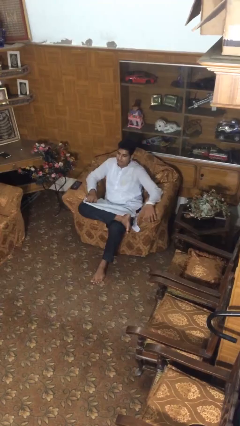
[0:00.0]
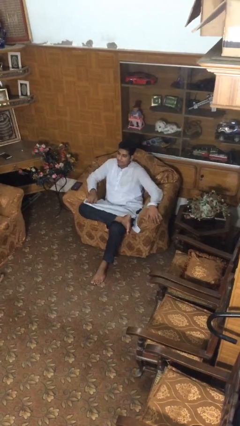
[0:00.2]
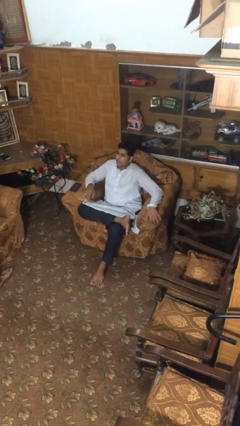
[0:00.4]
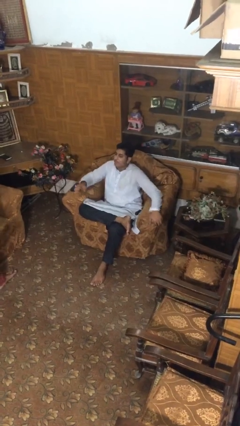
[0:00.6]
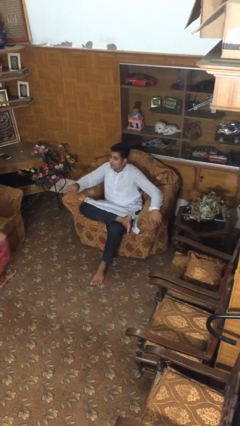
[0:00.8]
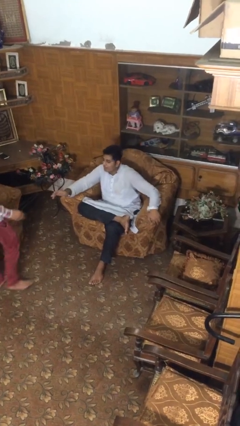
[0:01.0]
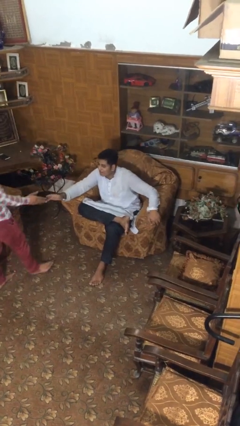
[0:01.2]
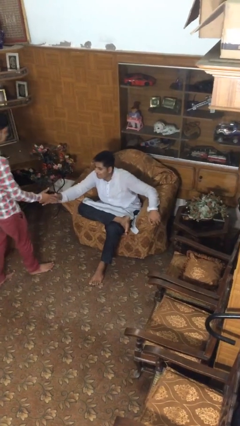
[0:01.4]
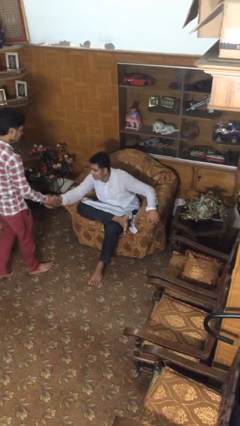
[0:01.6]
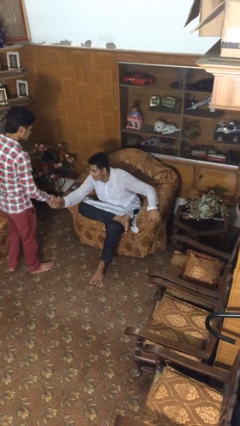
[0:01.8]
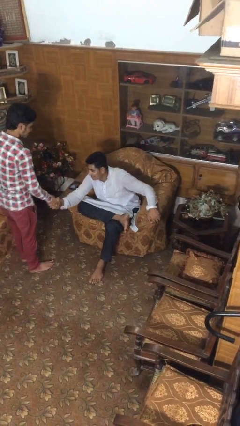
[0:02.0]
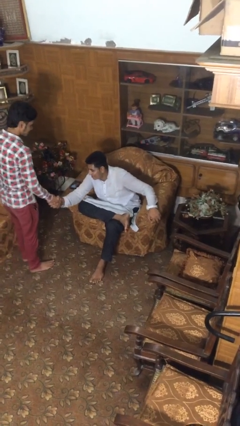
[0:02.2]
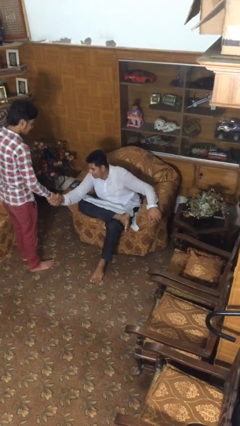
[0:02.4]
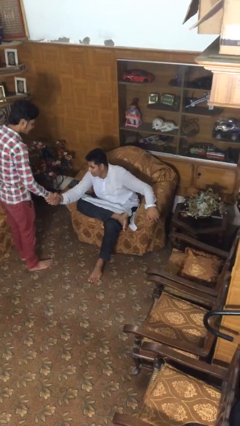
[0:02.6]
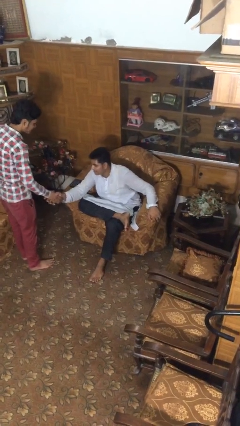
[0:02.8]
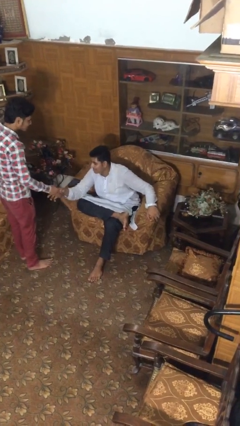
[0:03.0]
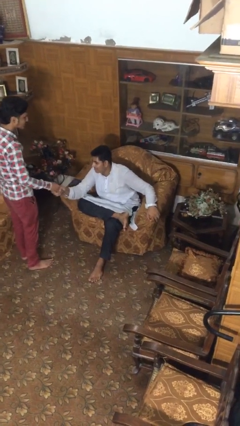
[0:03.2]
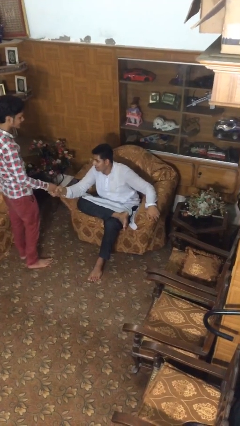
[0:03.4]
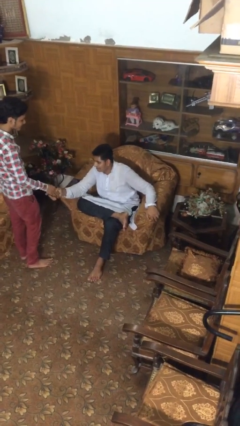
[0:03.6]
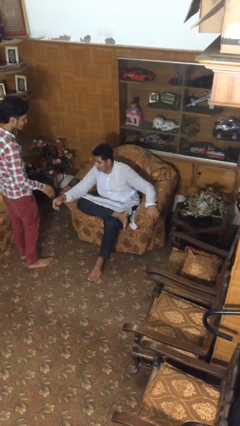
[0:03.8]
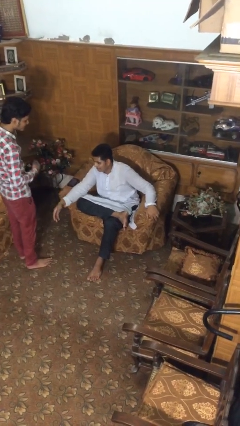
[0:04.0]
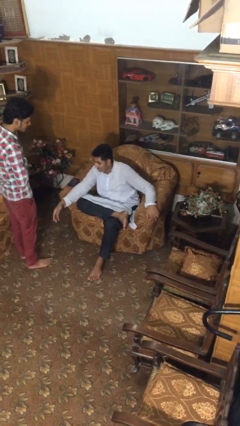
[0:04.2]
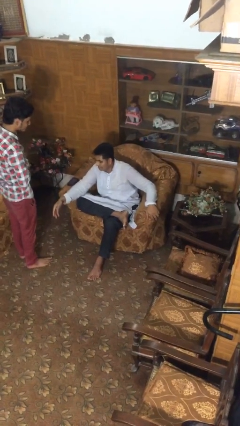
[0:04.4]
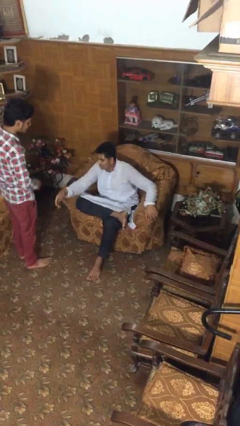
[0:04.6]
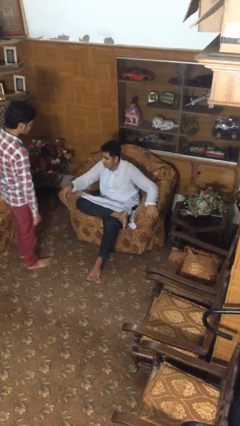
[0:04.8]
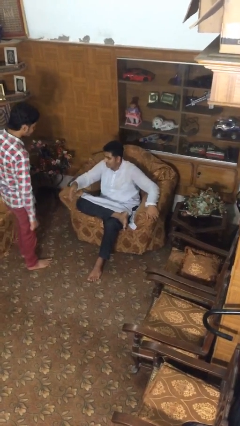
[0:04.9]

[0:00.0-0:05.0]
person shakes hand

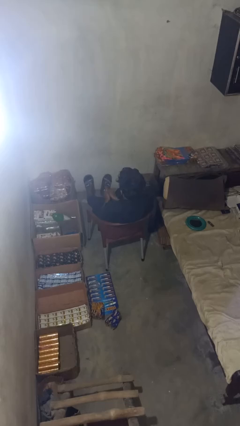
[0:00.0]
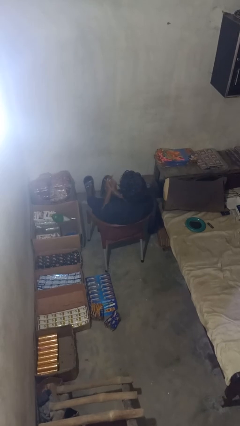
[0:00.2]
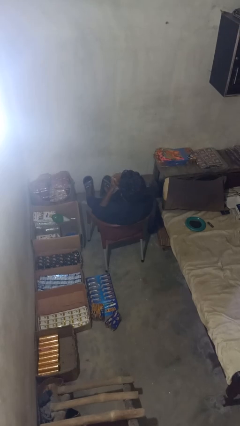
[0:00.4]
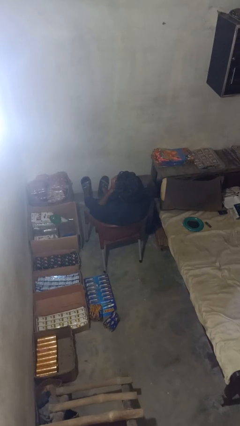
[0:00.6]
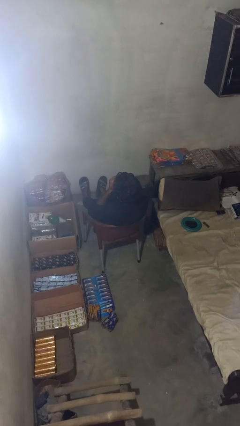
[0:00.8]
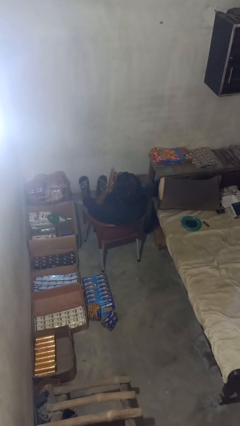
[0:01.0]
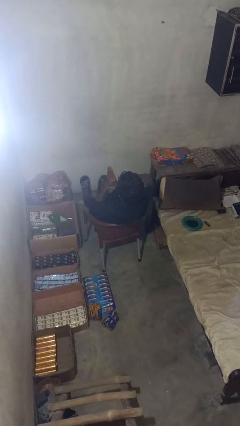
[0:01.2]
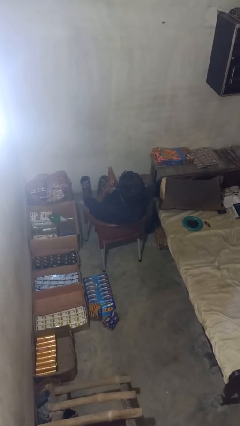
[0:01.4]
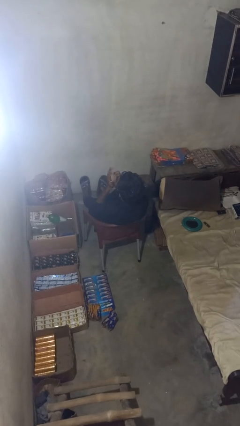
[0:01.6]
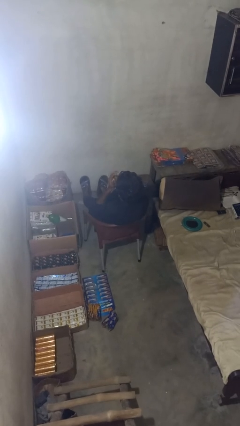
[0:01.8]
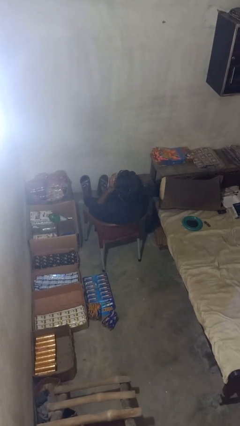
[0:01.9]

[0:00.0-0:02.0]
person blows into hands

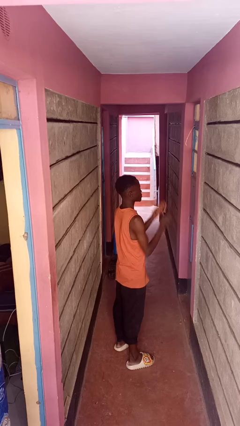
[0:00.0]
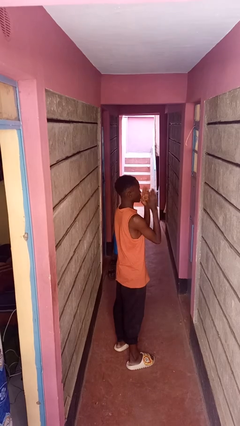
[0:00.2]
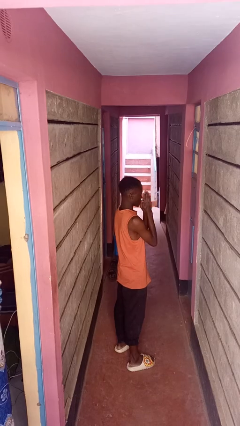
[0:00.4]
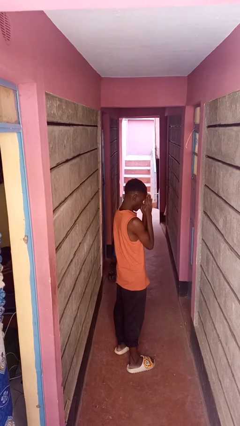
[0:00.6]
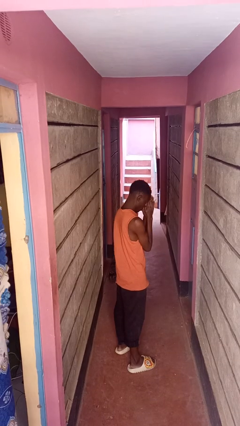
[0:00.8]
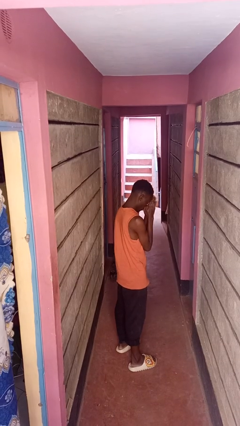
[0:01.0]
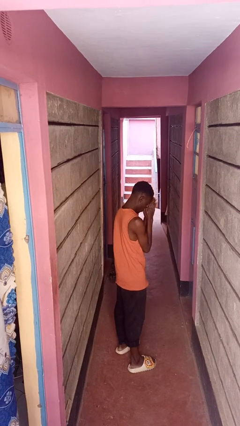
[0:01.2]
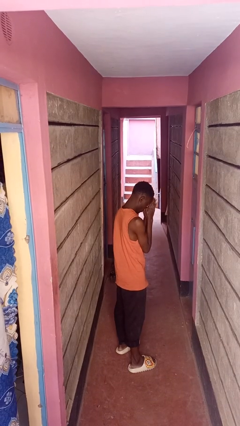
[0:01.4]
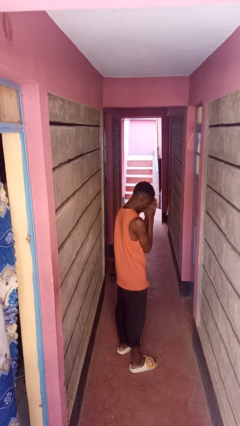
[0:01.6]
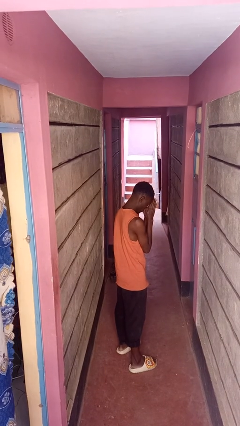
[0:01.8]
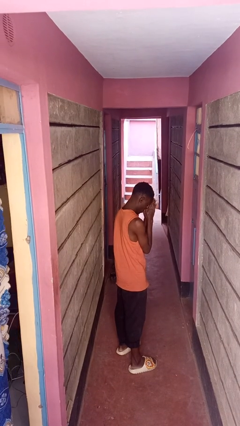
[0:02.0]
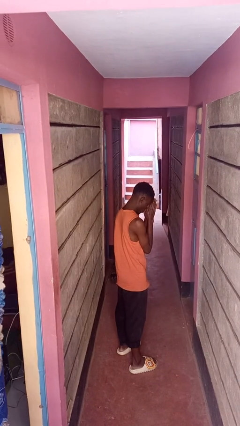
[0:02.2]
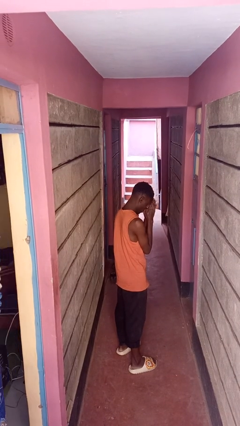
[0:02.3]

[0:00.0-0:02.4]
person prays

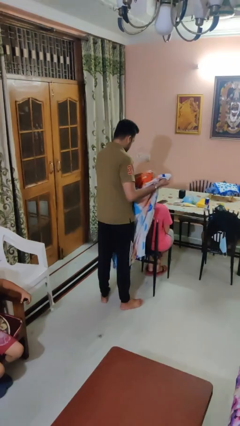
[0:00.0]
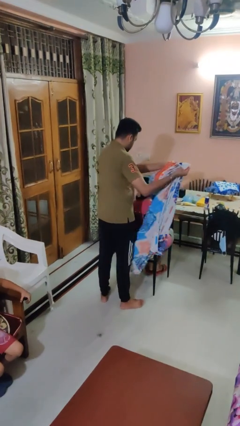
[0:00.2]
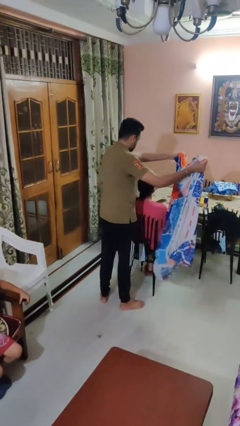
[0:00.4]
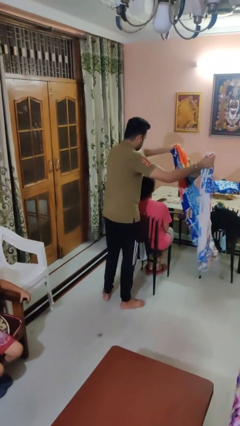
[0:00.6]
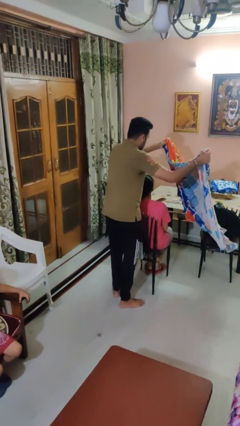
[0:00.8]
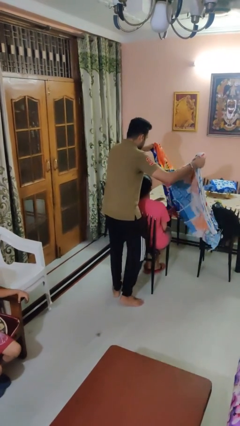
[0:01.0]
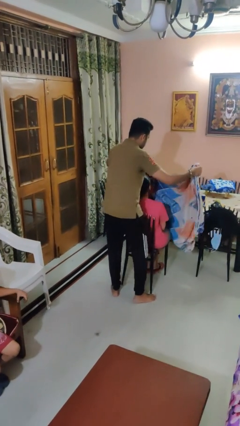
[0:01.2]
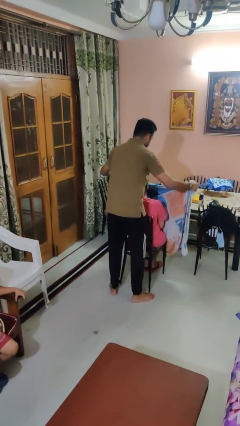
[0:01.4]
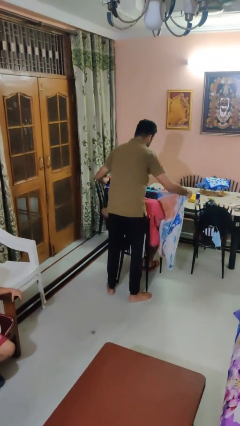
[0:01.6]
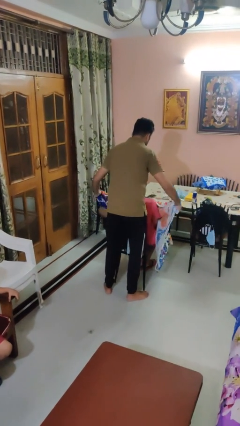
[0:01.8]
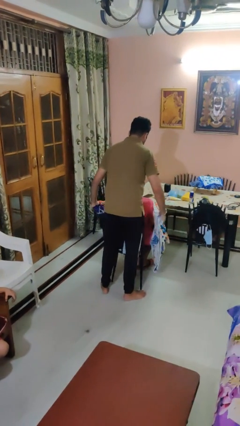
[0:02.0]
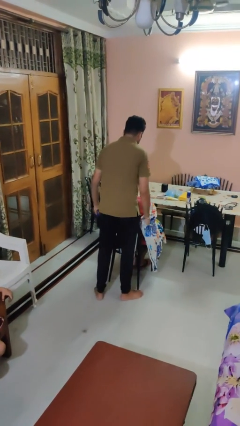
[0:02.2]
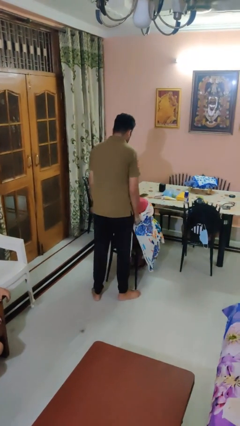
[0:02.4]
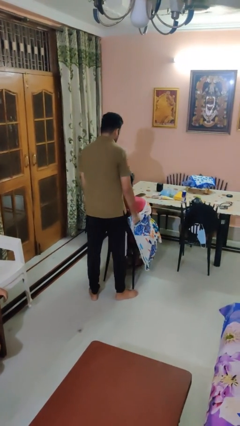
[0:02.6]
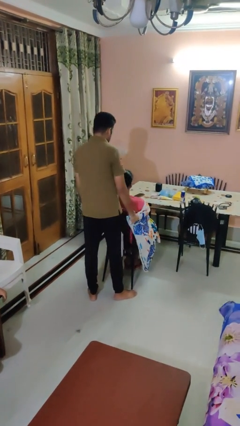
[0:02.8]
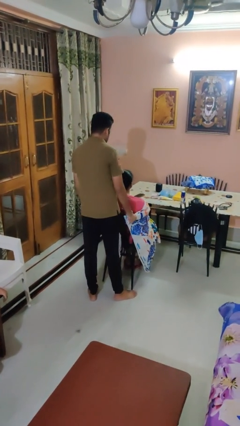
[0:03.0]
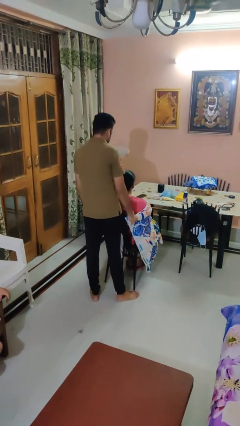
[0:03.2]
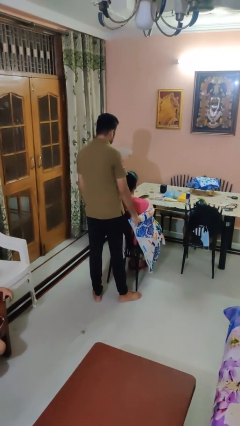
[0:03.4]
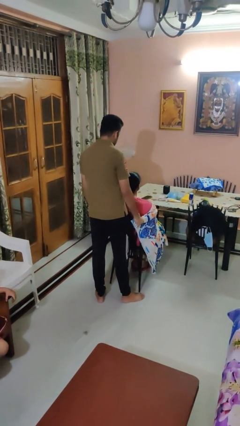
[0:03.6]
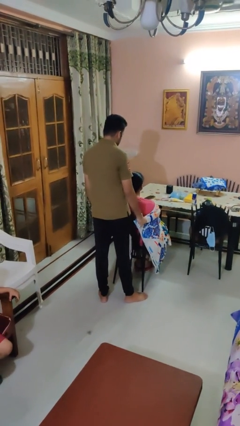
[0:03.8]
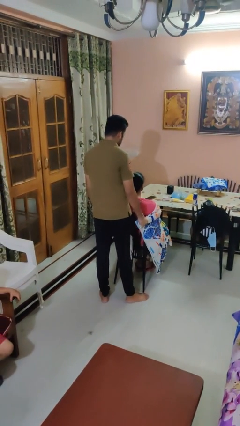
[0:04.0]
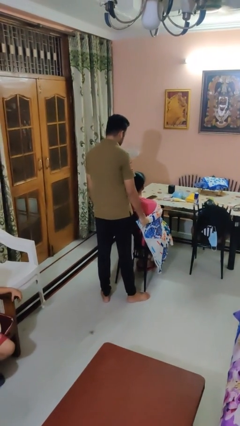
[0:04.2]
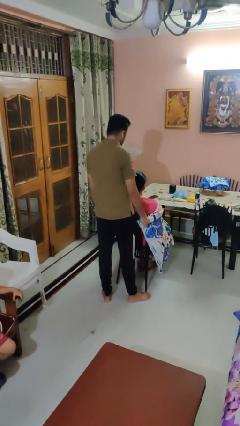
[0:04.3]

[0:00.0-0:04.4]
person covers friend with blanket

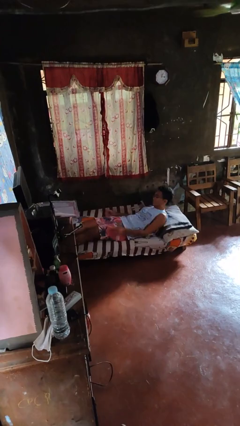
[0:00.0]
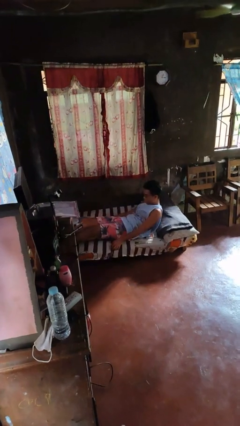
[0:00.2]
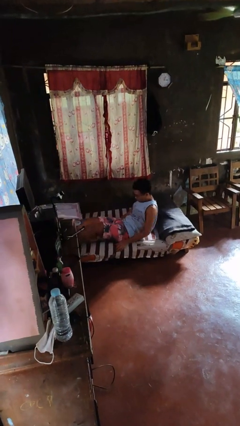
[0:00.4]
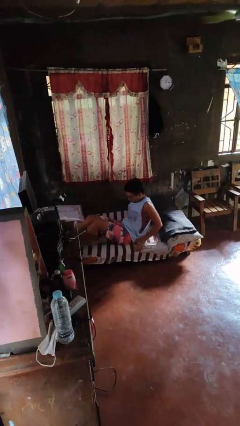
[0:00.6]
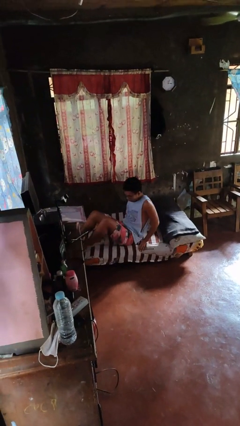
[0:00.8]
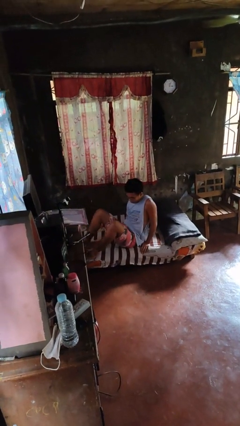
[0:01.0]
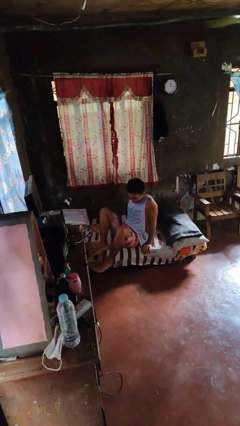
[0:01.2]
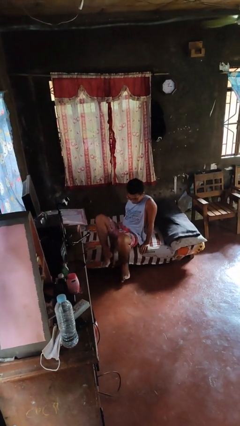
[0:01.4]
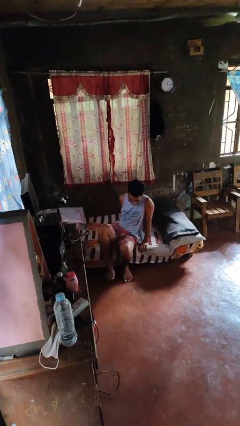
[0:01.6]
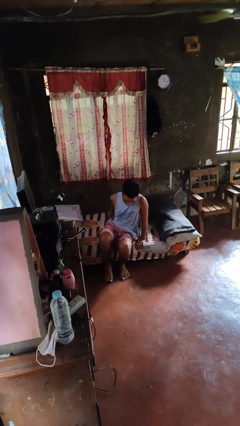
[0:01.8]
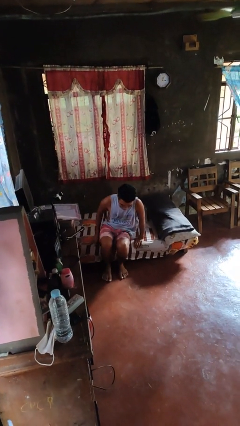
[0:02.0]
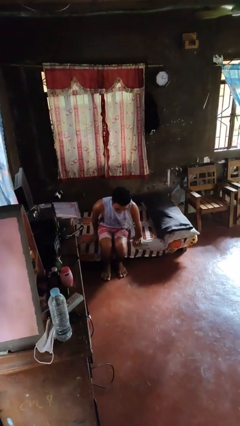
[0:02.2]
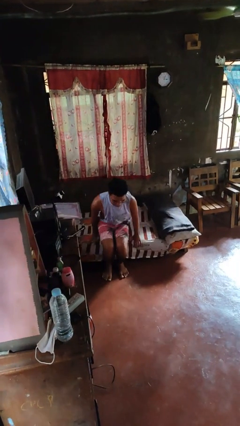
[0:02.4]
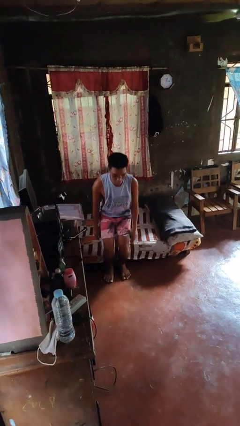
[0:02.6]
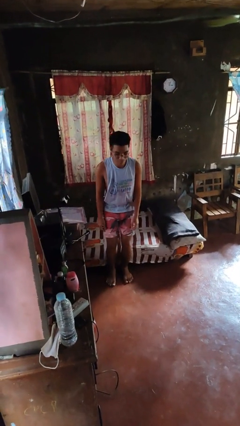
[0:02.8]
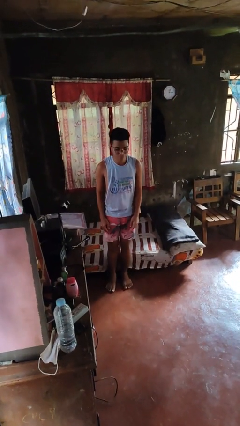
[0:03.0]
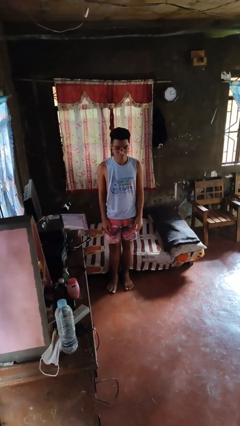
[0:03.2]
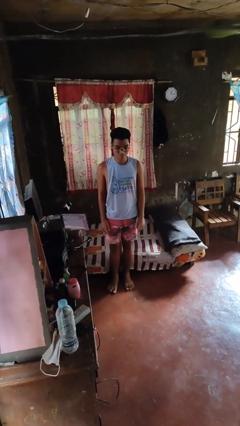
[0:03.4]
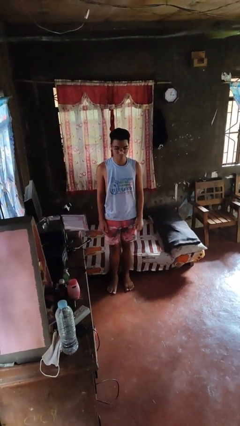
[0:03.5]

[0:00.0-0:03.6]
person stands up
